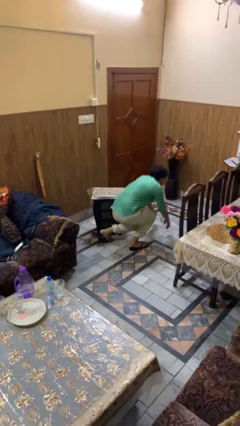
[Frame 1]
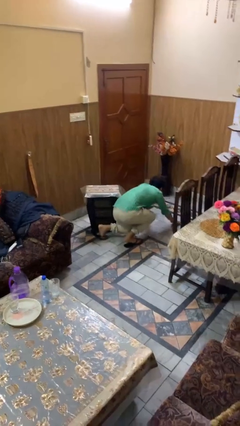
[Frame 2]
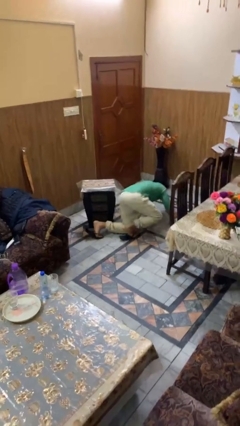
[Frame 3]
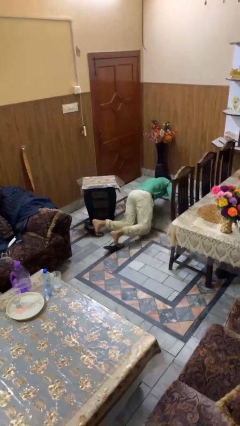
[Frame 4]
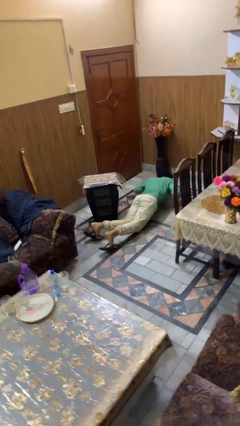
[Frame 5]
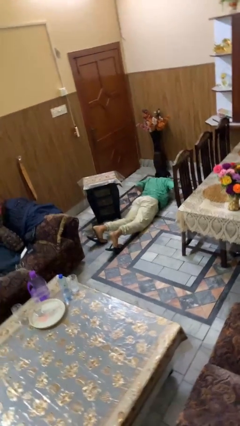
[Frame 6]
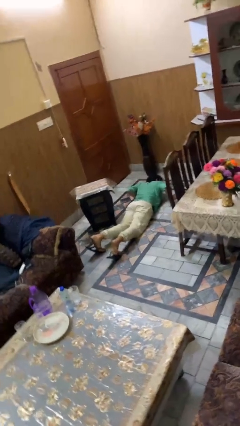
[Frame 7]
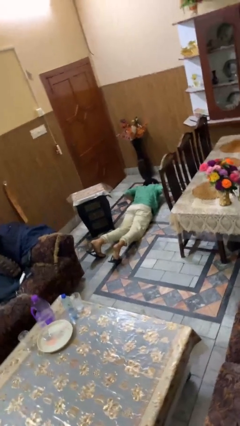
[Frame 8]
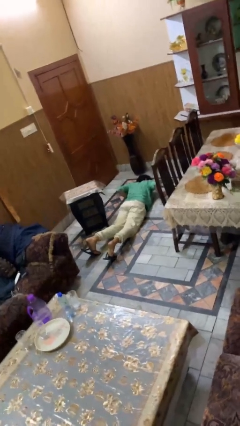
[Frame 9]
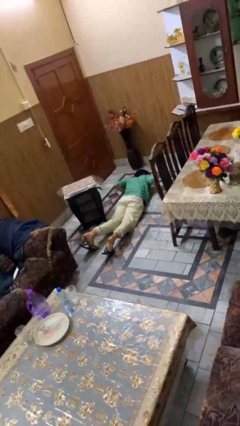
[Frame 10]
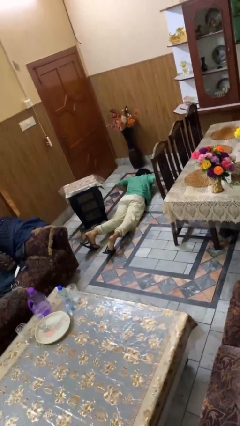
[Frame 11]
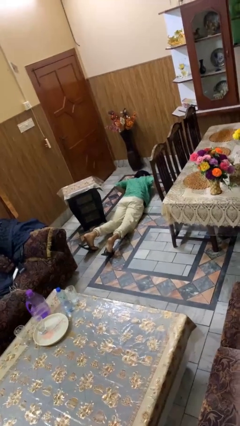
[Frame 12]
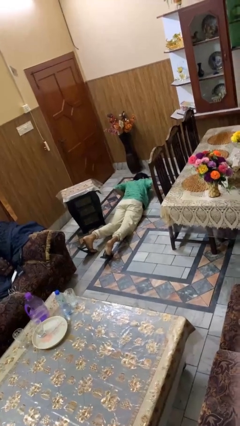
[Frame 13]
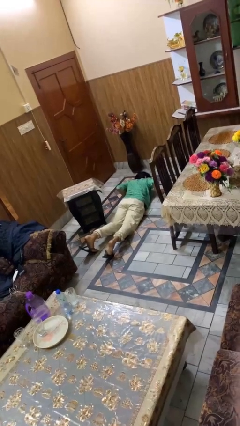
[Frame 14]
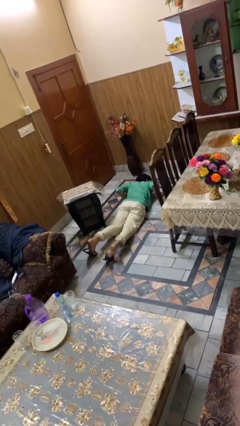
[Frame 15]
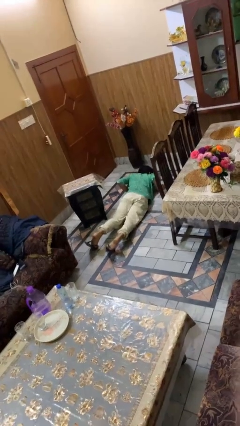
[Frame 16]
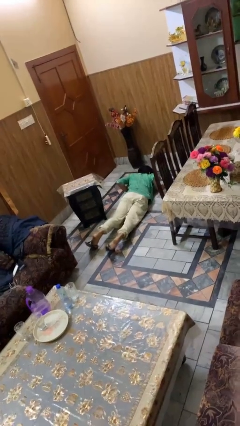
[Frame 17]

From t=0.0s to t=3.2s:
person lies down on floor

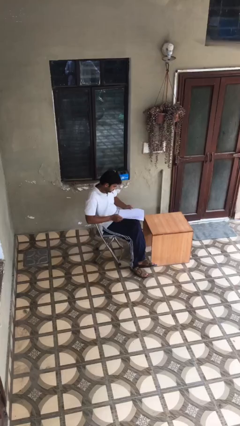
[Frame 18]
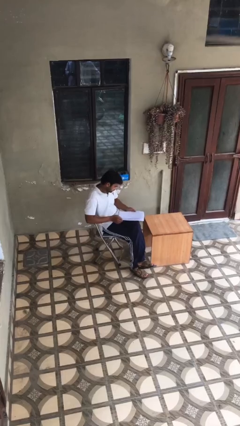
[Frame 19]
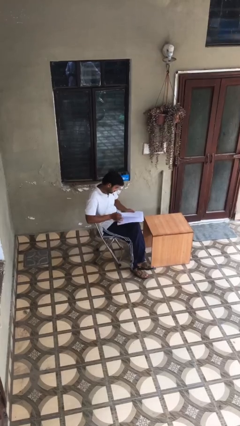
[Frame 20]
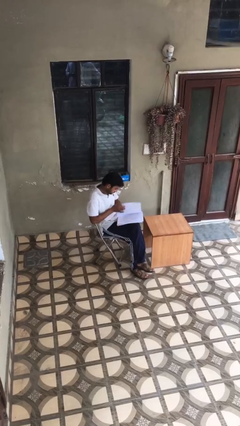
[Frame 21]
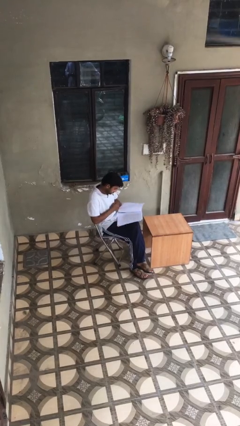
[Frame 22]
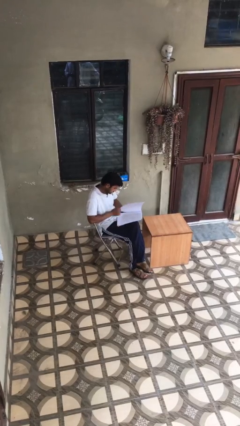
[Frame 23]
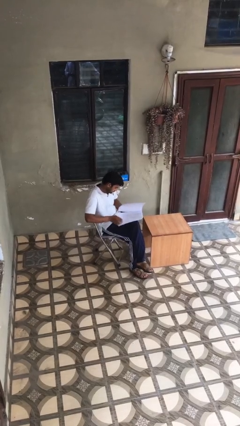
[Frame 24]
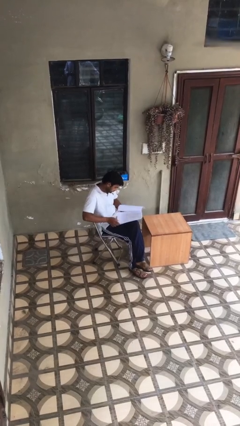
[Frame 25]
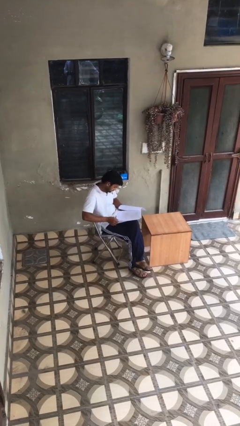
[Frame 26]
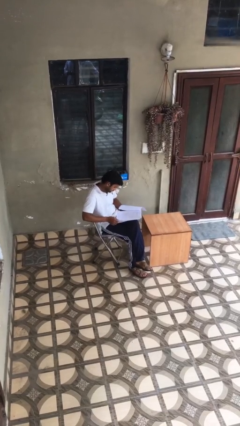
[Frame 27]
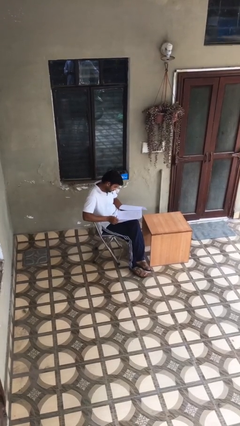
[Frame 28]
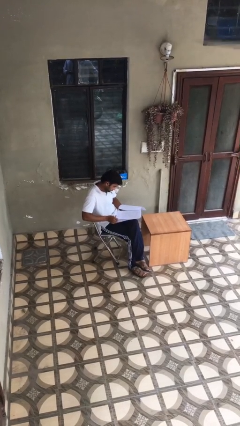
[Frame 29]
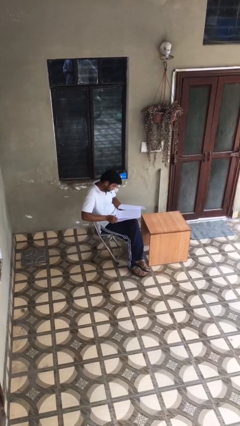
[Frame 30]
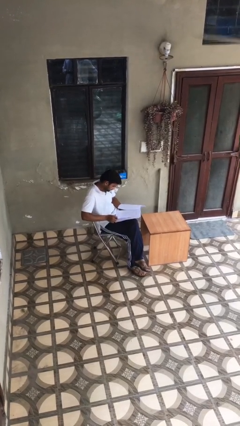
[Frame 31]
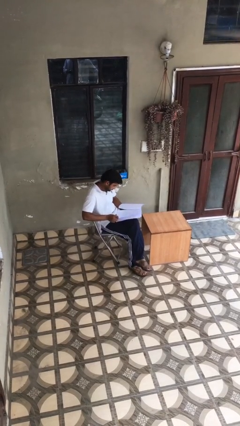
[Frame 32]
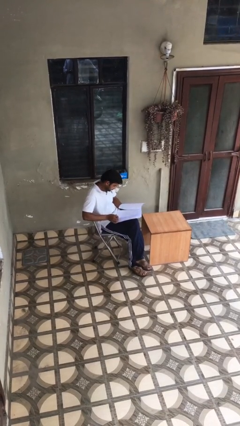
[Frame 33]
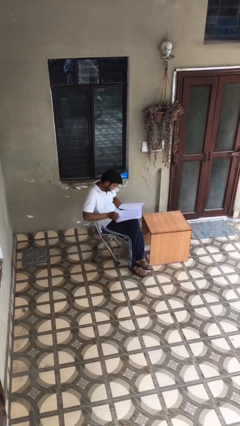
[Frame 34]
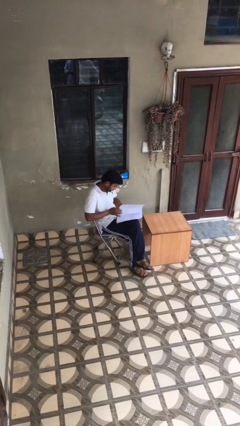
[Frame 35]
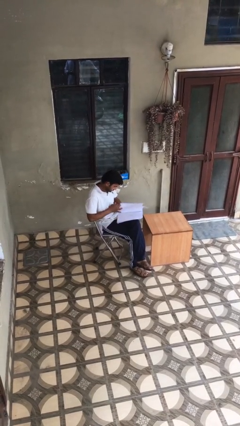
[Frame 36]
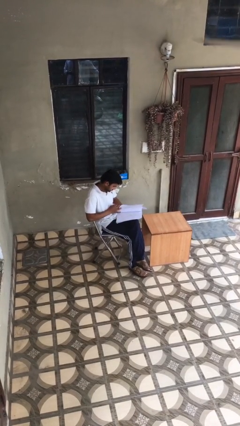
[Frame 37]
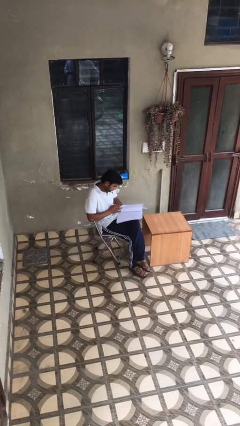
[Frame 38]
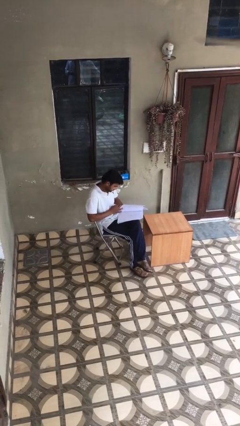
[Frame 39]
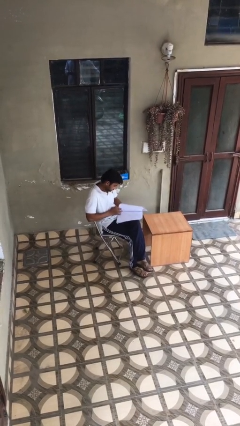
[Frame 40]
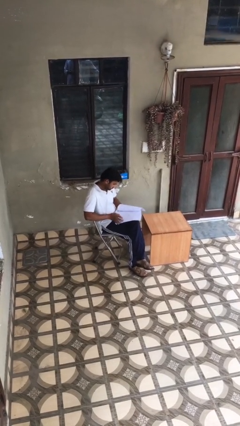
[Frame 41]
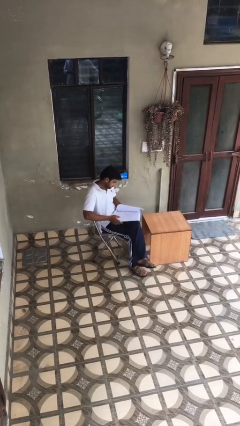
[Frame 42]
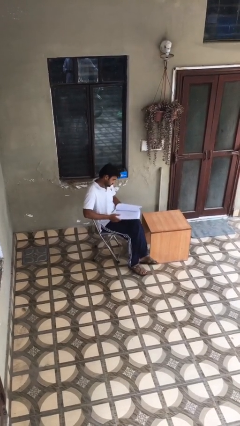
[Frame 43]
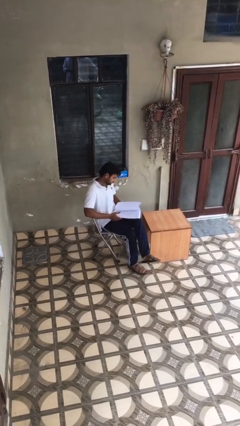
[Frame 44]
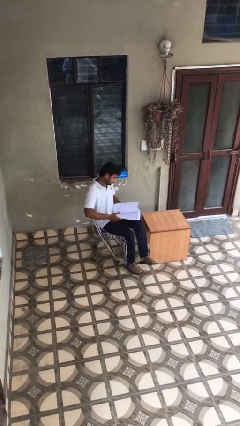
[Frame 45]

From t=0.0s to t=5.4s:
person reads document

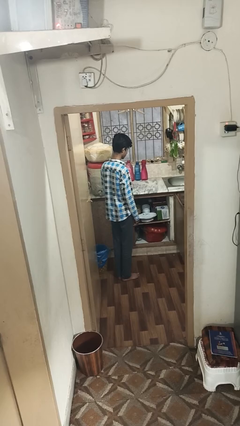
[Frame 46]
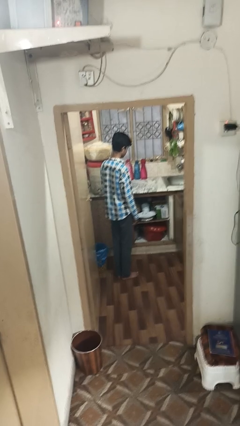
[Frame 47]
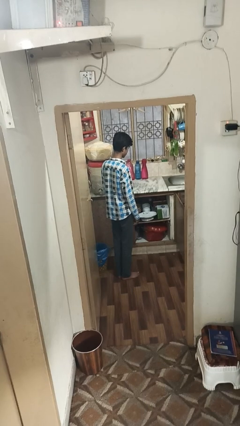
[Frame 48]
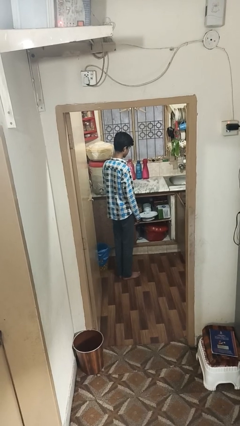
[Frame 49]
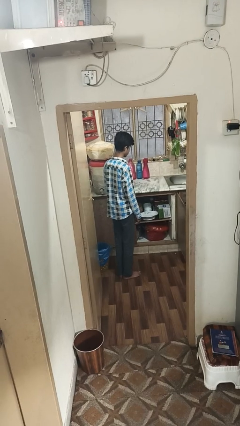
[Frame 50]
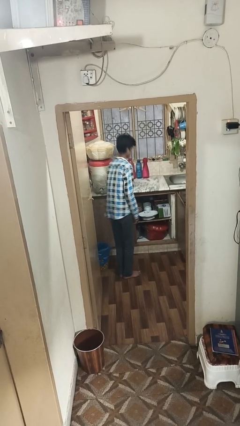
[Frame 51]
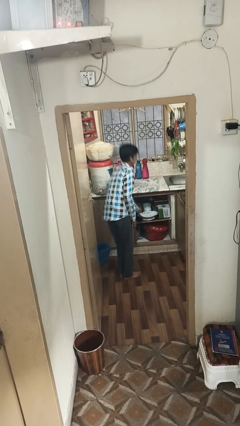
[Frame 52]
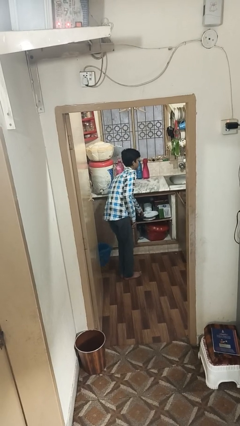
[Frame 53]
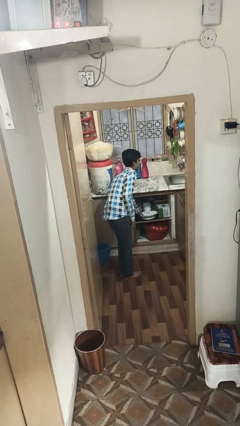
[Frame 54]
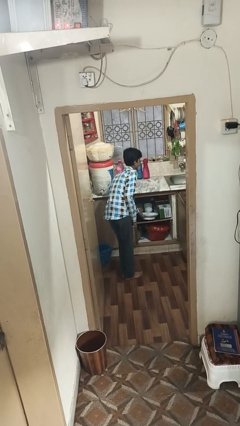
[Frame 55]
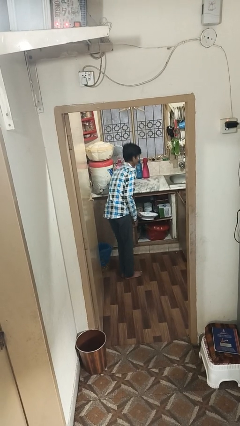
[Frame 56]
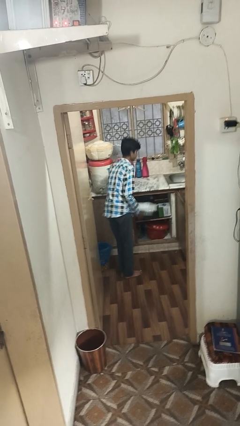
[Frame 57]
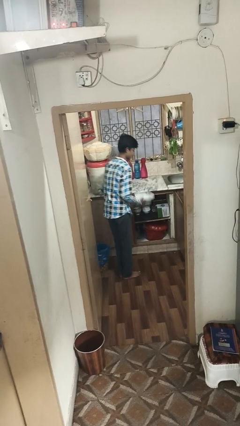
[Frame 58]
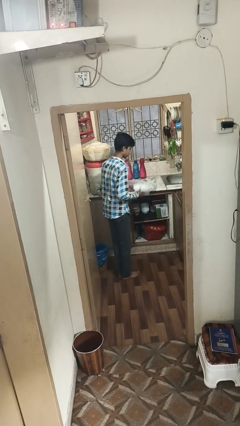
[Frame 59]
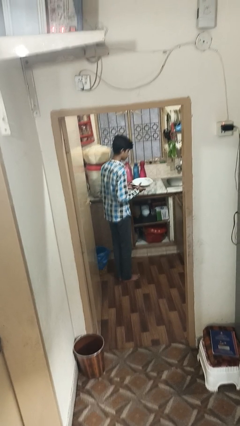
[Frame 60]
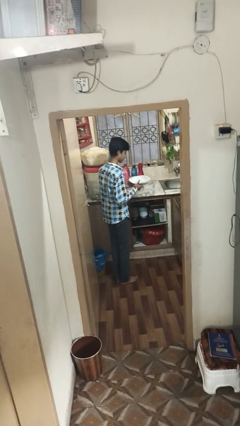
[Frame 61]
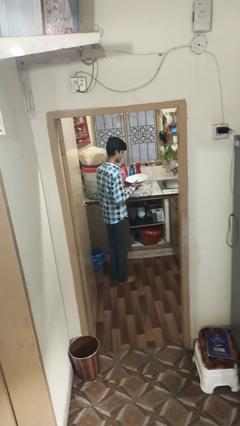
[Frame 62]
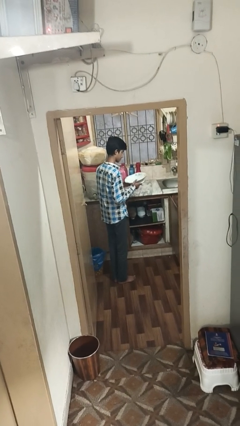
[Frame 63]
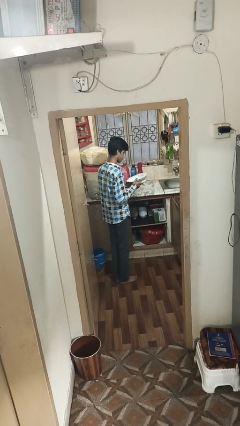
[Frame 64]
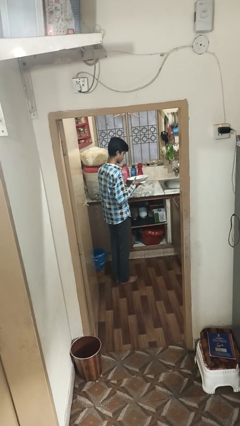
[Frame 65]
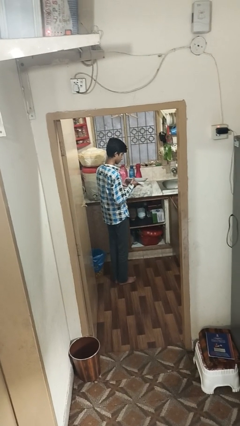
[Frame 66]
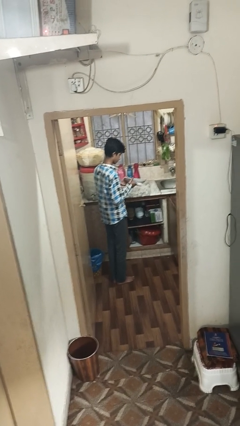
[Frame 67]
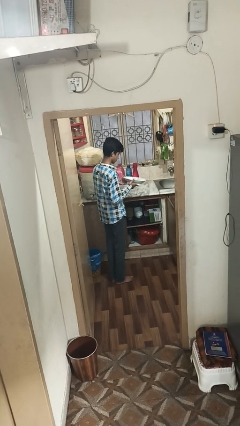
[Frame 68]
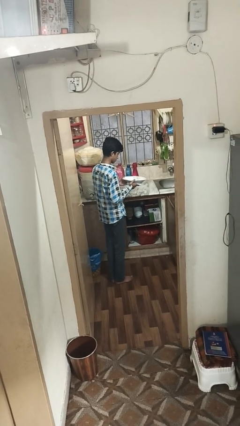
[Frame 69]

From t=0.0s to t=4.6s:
person picks up object from cabinet

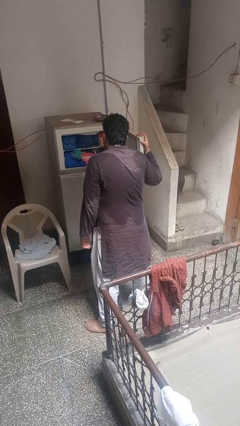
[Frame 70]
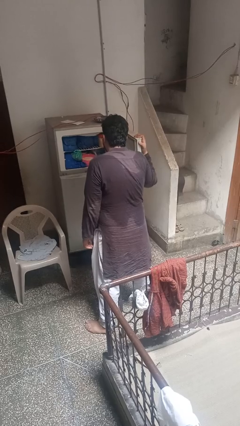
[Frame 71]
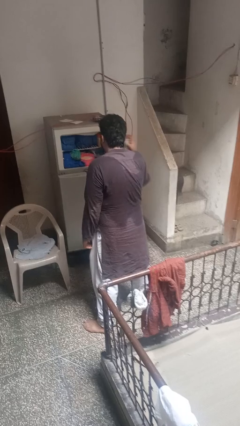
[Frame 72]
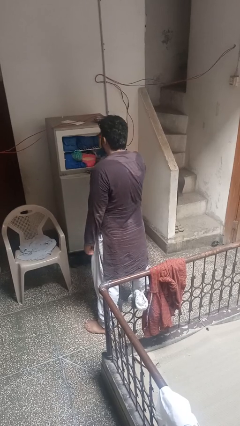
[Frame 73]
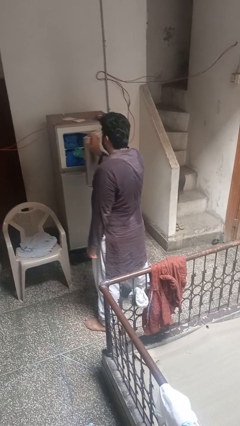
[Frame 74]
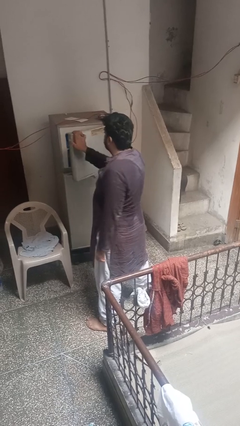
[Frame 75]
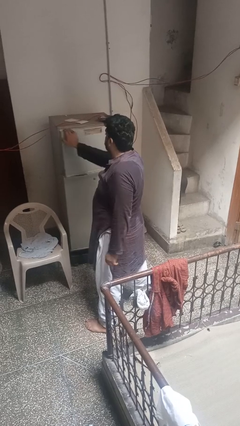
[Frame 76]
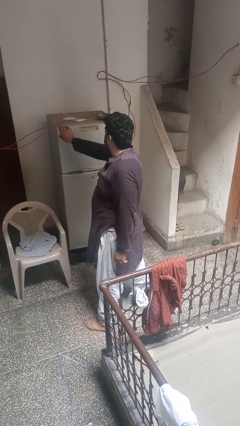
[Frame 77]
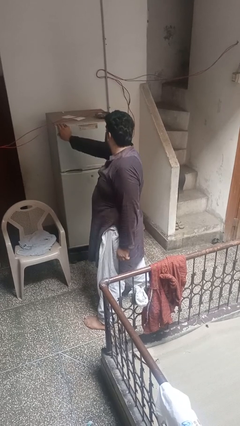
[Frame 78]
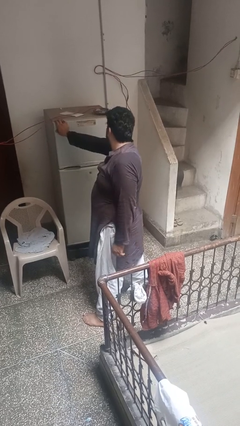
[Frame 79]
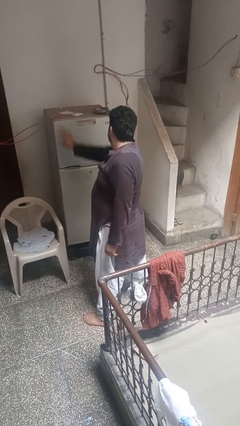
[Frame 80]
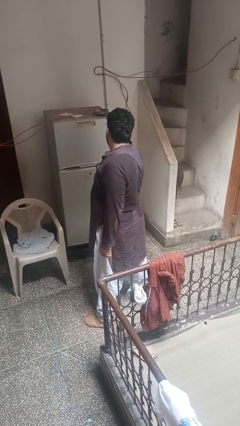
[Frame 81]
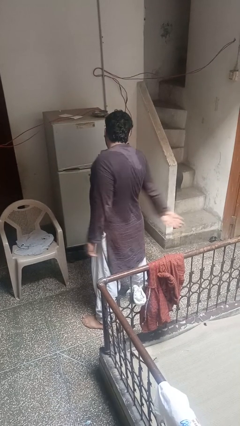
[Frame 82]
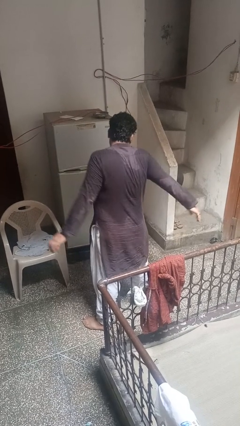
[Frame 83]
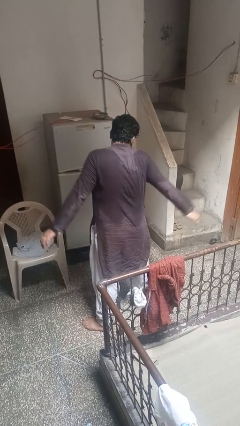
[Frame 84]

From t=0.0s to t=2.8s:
person closes refrigerator

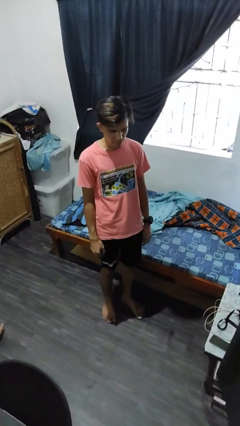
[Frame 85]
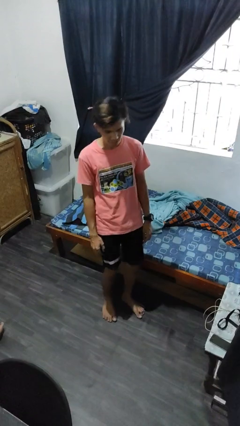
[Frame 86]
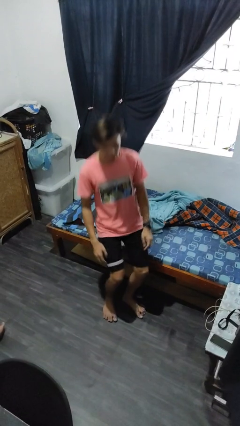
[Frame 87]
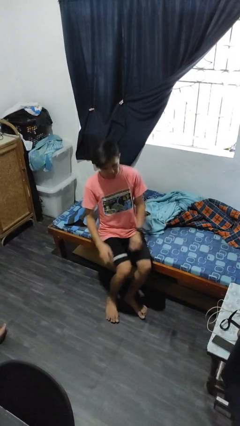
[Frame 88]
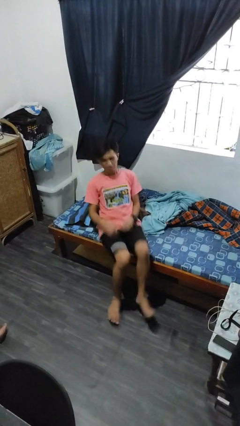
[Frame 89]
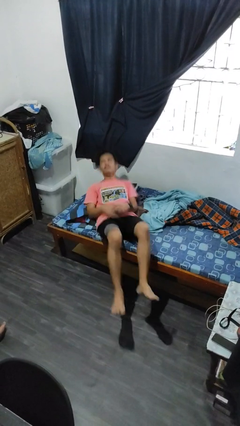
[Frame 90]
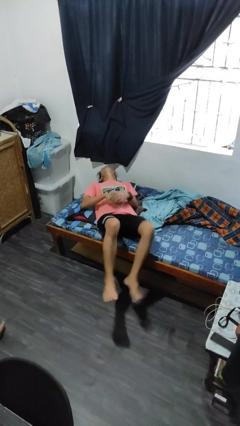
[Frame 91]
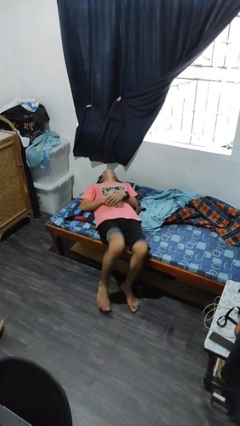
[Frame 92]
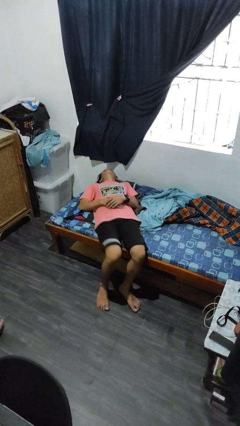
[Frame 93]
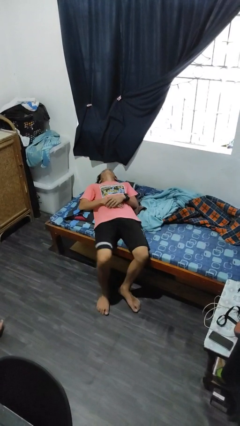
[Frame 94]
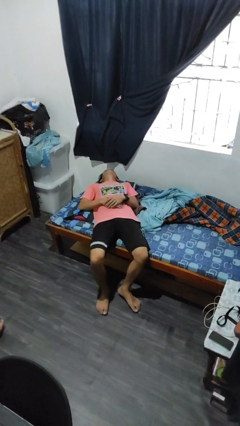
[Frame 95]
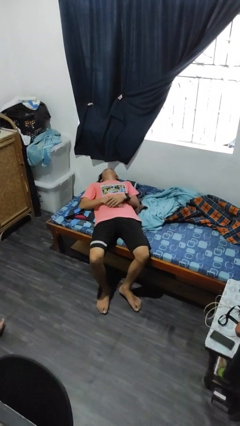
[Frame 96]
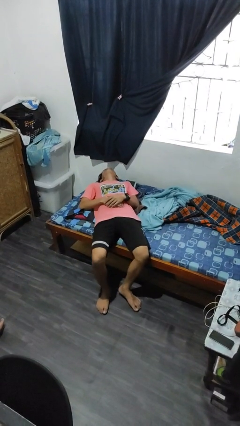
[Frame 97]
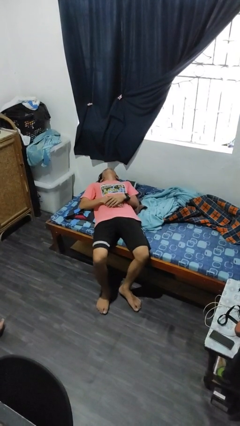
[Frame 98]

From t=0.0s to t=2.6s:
person lies down on bed
